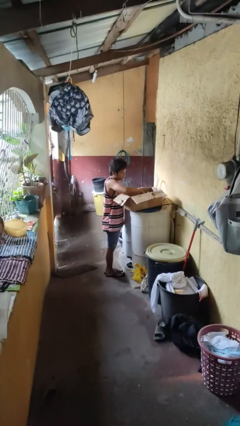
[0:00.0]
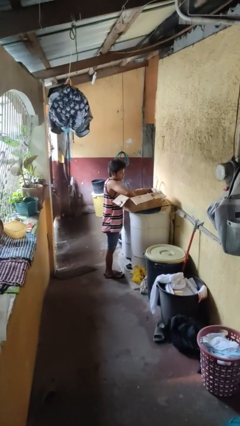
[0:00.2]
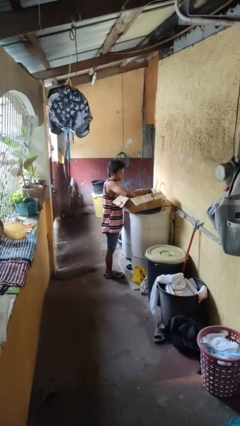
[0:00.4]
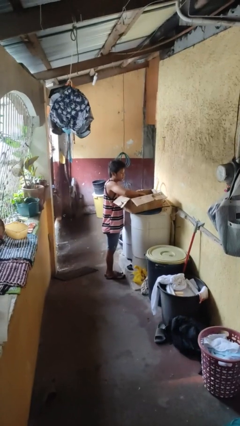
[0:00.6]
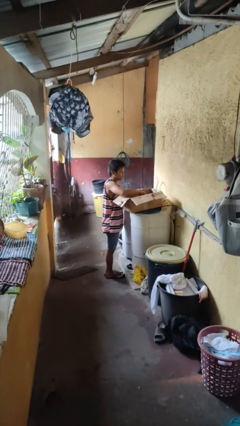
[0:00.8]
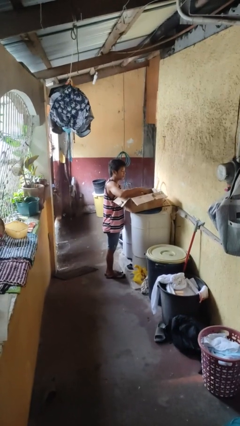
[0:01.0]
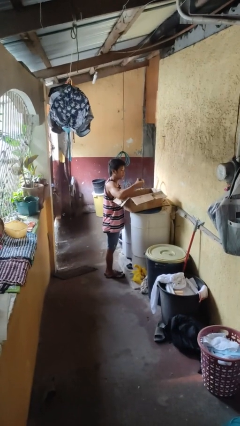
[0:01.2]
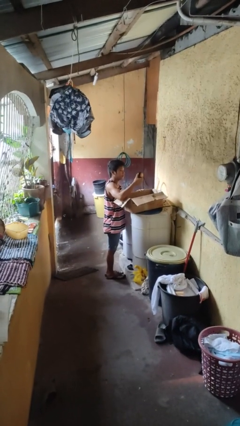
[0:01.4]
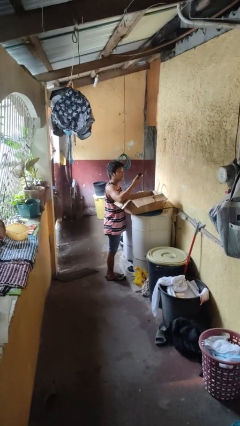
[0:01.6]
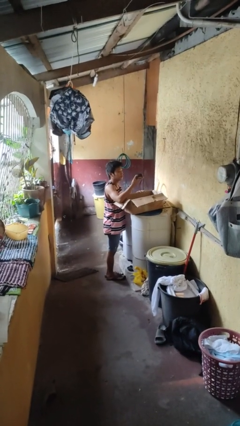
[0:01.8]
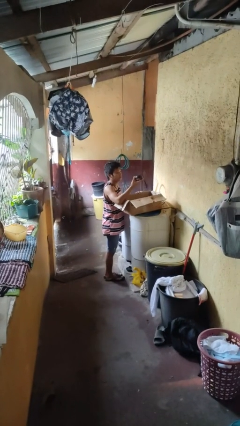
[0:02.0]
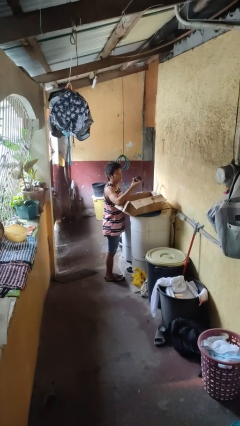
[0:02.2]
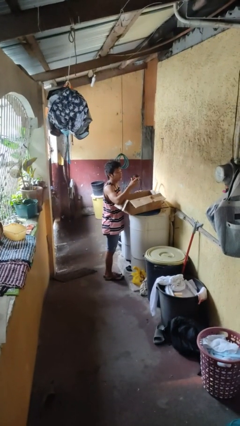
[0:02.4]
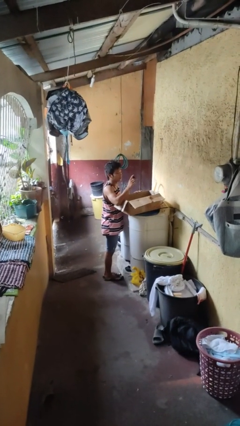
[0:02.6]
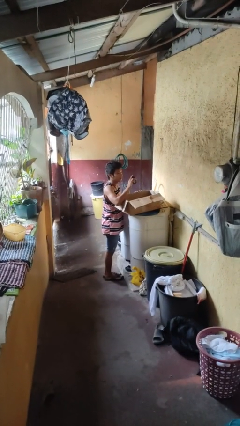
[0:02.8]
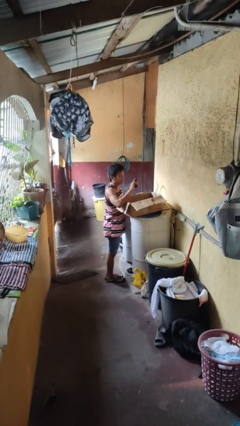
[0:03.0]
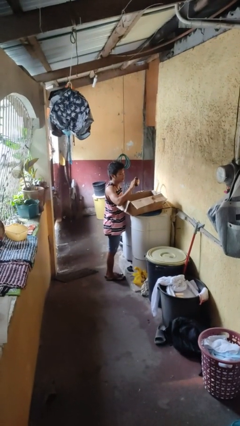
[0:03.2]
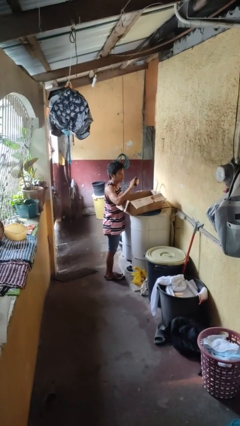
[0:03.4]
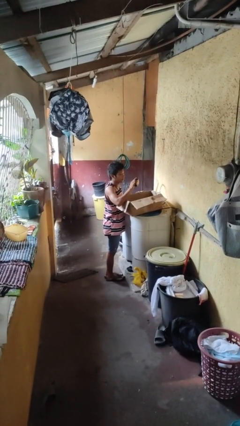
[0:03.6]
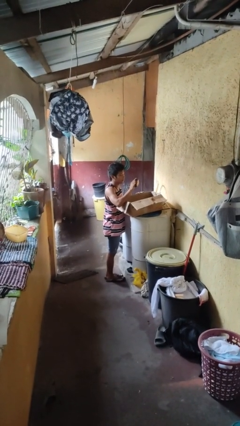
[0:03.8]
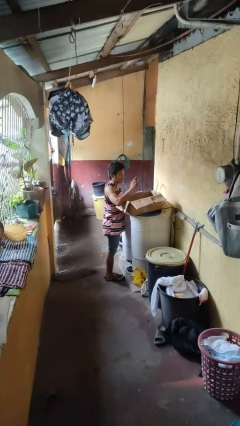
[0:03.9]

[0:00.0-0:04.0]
person takes object from box

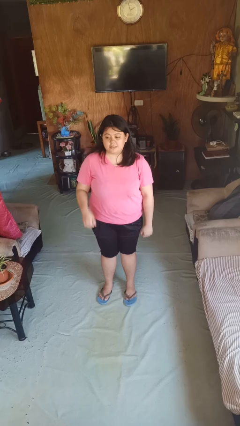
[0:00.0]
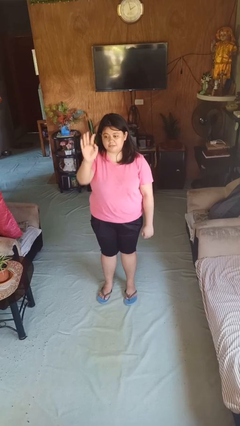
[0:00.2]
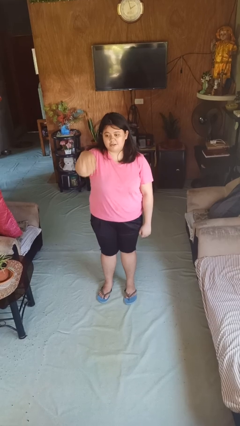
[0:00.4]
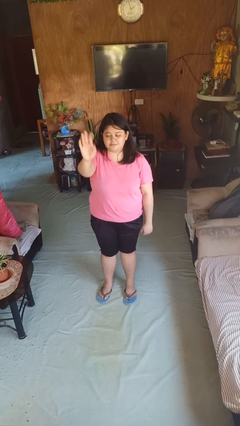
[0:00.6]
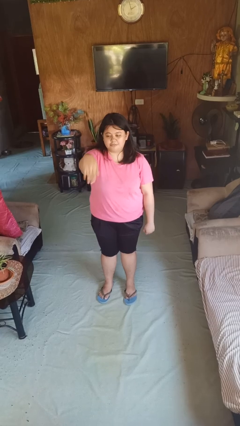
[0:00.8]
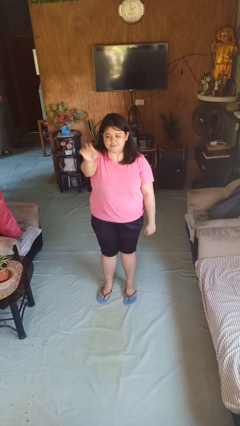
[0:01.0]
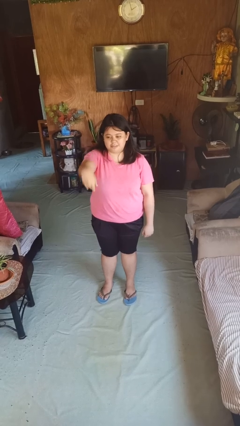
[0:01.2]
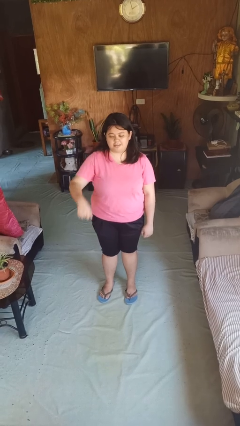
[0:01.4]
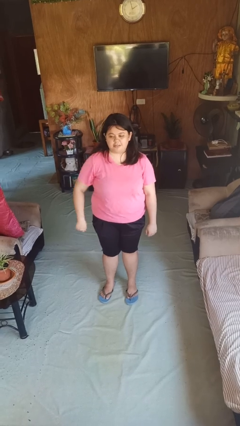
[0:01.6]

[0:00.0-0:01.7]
person gestures come here

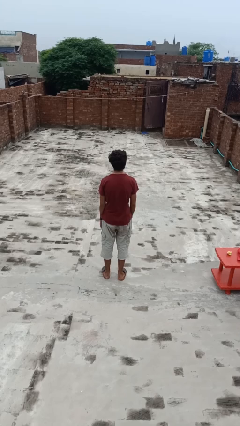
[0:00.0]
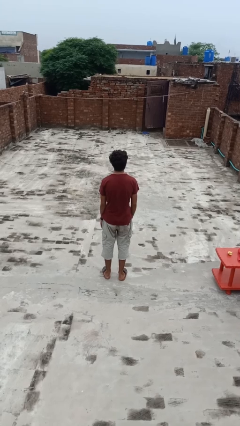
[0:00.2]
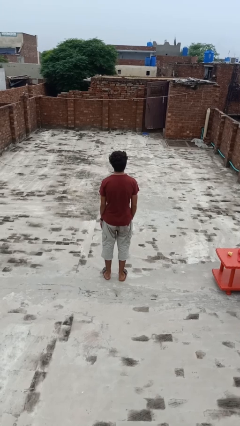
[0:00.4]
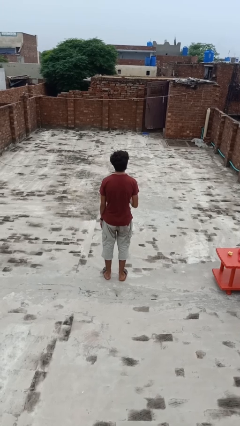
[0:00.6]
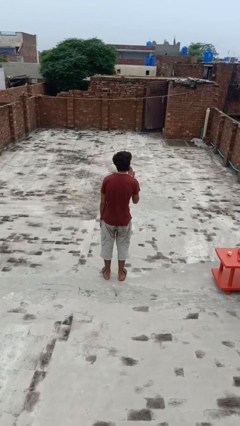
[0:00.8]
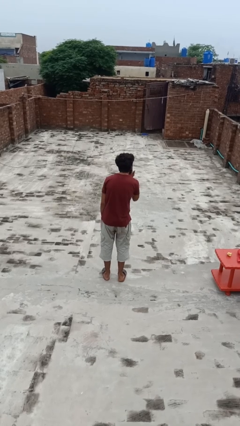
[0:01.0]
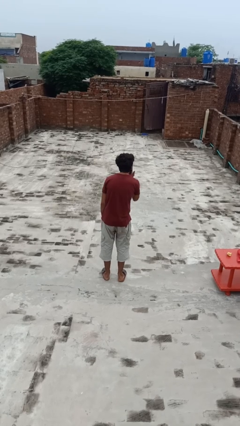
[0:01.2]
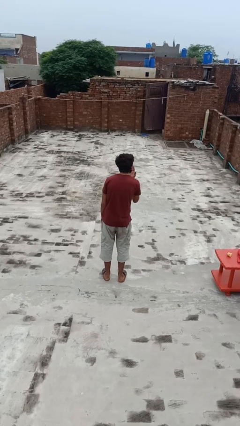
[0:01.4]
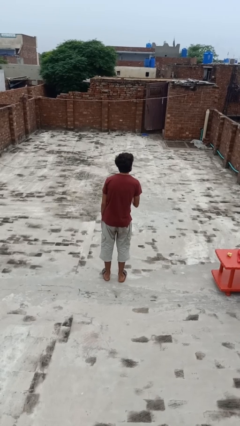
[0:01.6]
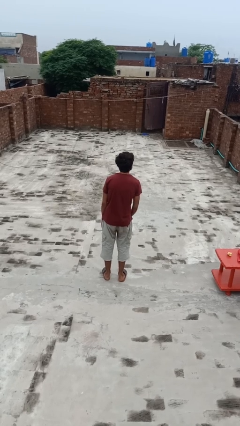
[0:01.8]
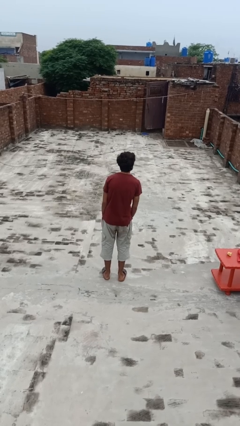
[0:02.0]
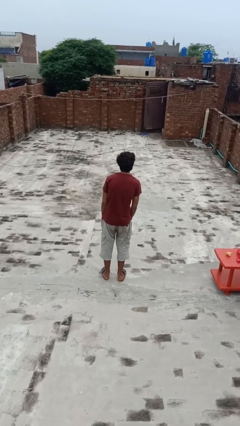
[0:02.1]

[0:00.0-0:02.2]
person gestures blow kiss

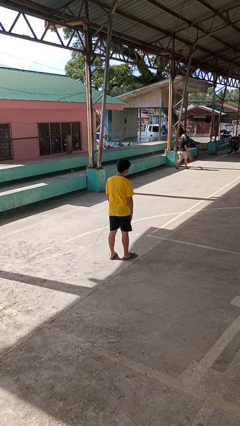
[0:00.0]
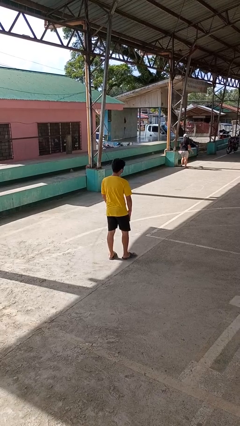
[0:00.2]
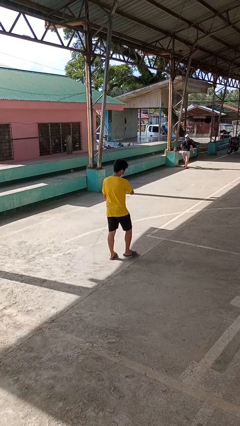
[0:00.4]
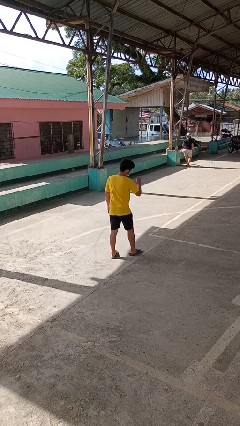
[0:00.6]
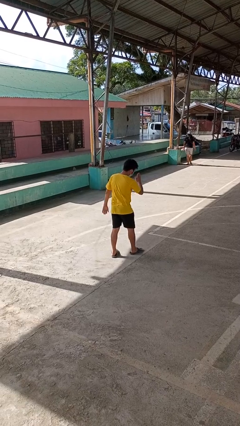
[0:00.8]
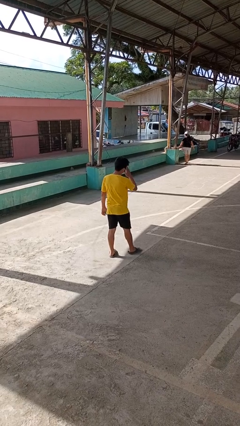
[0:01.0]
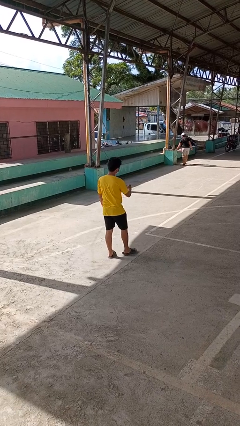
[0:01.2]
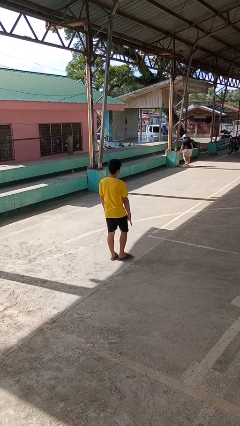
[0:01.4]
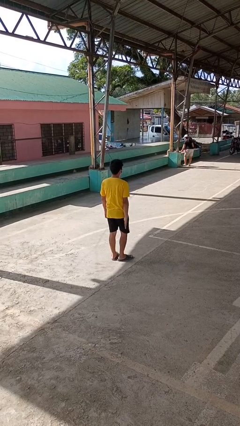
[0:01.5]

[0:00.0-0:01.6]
person karate chop

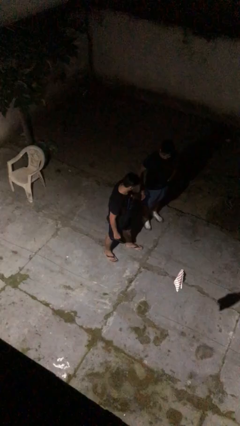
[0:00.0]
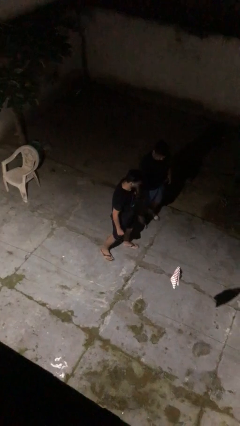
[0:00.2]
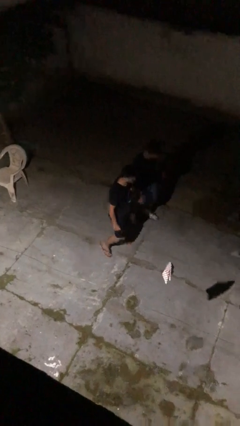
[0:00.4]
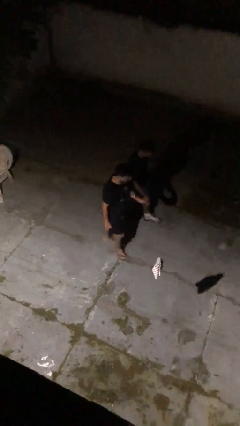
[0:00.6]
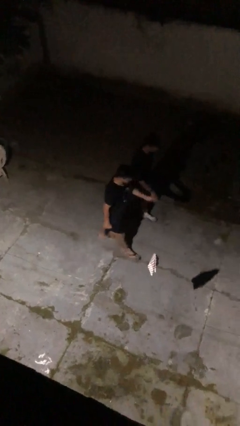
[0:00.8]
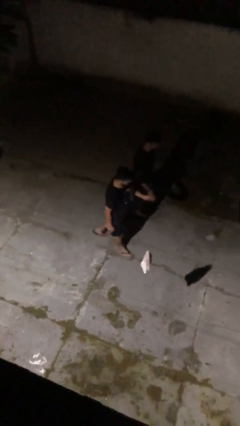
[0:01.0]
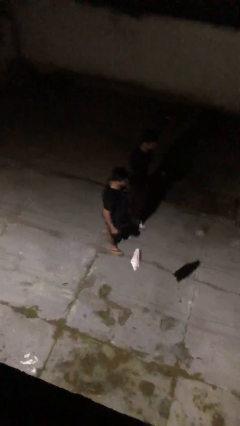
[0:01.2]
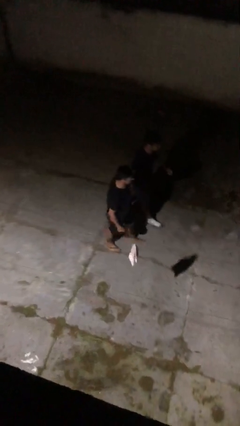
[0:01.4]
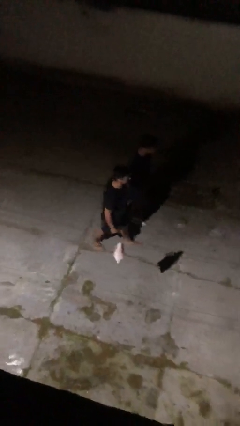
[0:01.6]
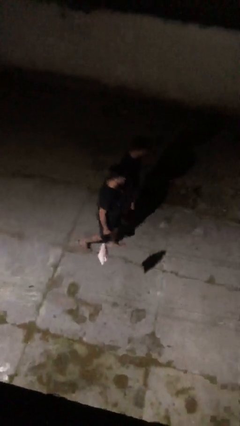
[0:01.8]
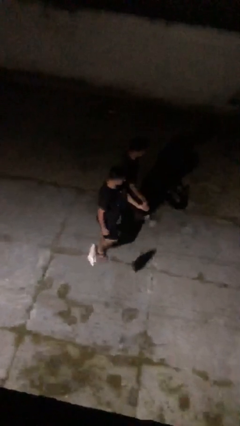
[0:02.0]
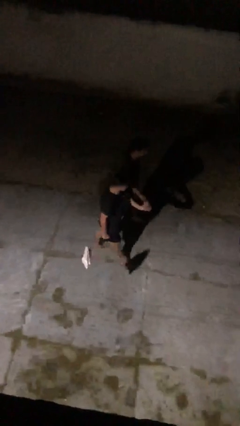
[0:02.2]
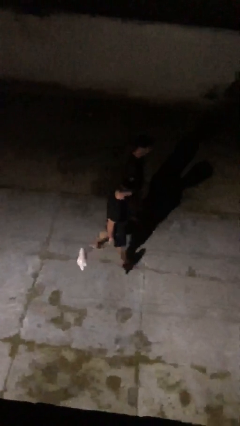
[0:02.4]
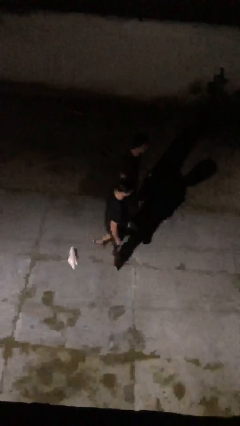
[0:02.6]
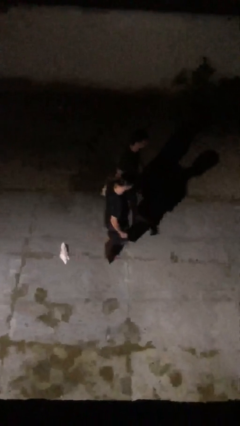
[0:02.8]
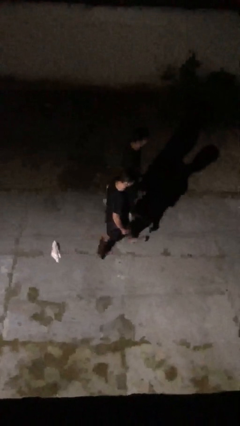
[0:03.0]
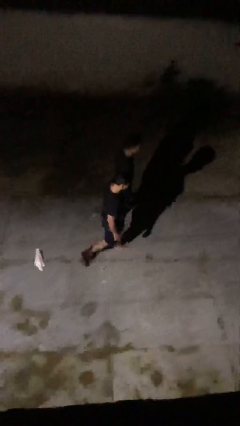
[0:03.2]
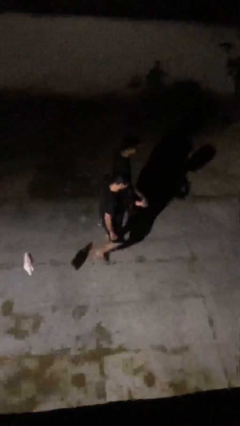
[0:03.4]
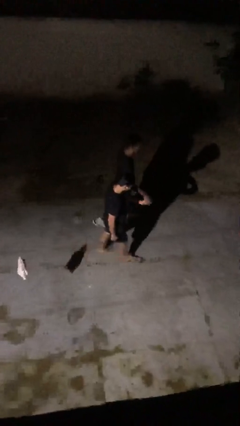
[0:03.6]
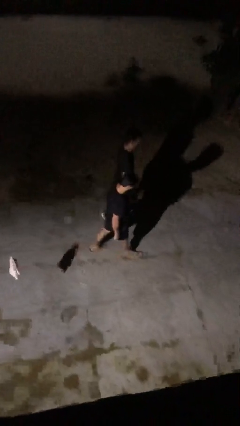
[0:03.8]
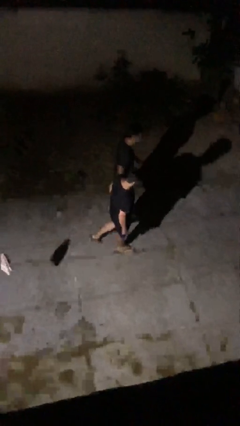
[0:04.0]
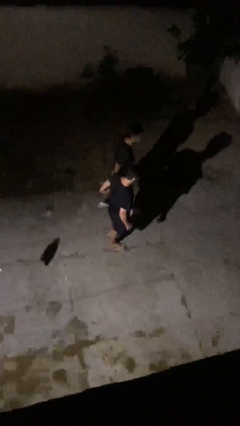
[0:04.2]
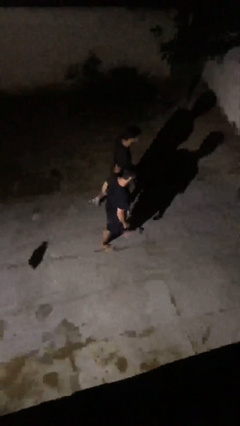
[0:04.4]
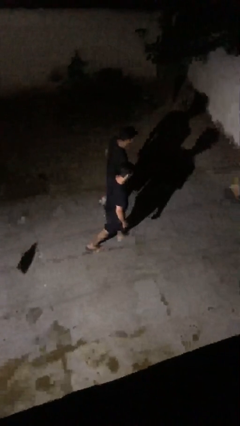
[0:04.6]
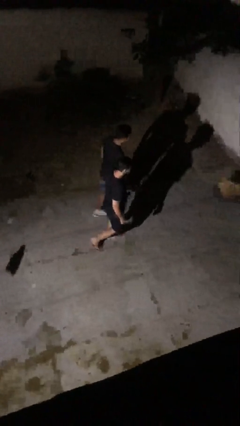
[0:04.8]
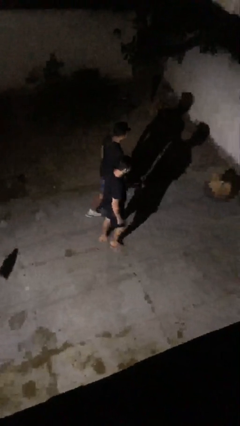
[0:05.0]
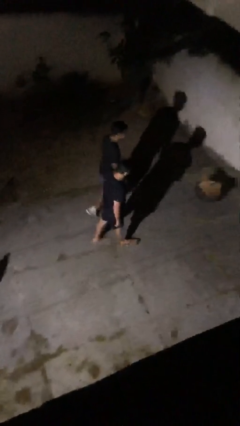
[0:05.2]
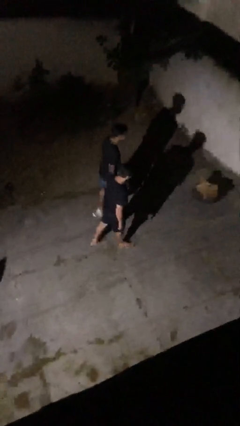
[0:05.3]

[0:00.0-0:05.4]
person holds hand

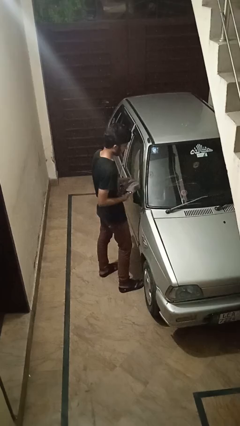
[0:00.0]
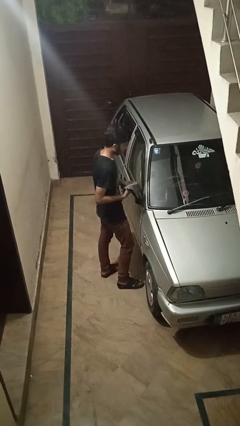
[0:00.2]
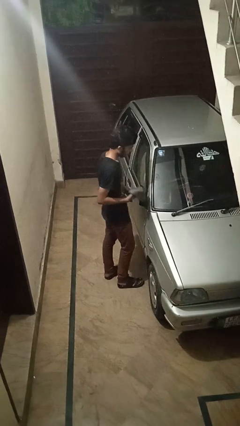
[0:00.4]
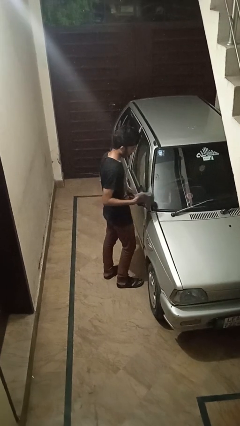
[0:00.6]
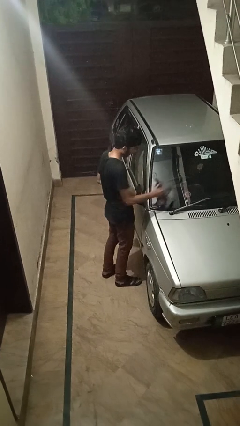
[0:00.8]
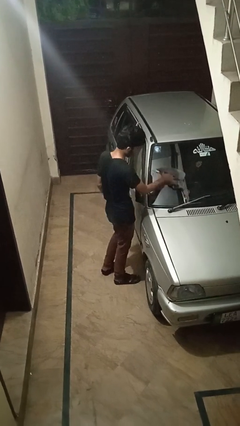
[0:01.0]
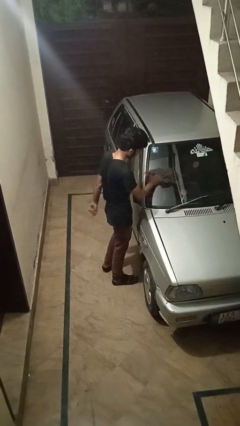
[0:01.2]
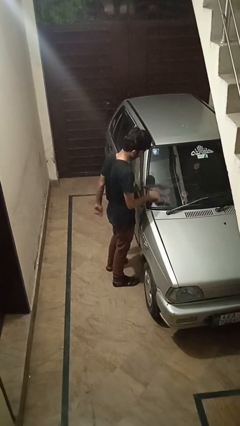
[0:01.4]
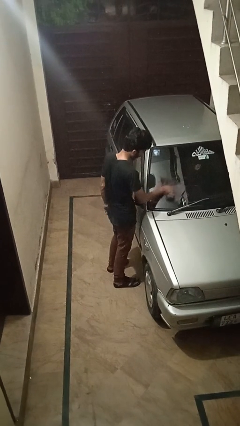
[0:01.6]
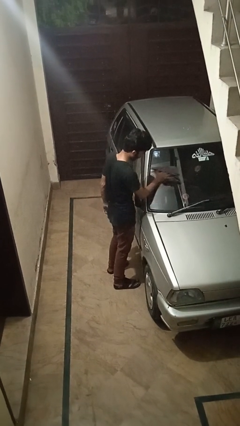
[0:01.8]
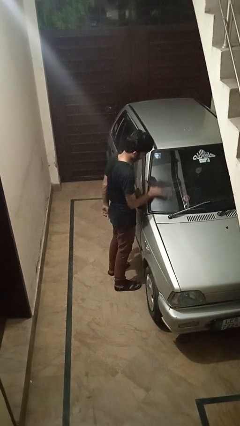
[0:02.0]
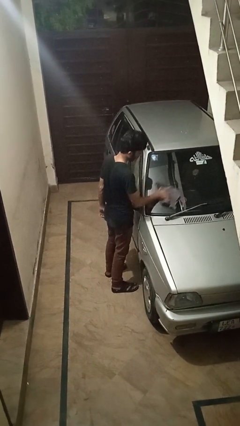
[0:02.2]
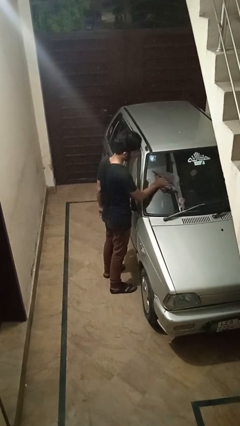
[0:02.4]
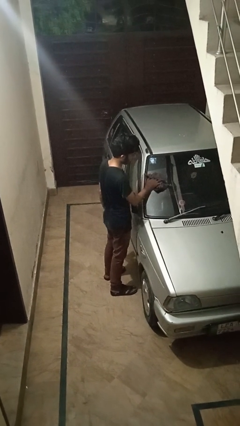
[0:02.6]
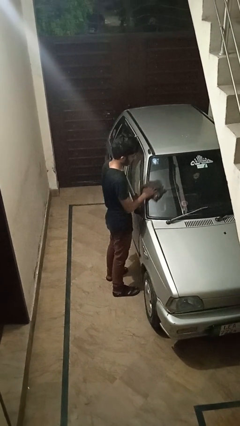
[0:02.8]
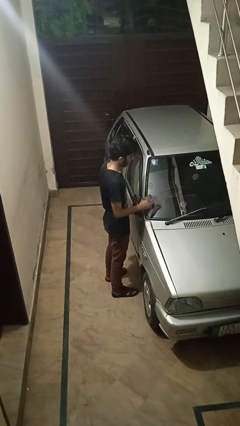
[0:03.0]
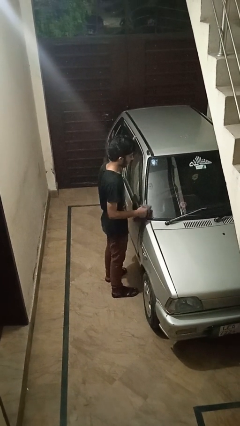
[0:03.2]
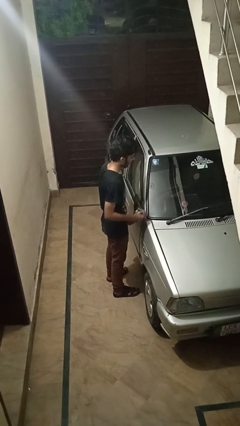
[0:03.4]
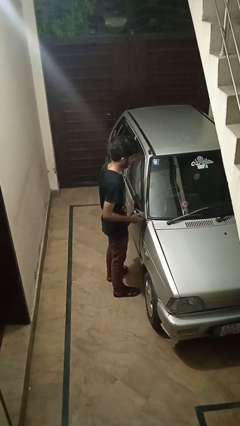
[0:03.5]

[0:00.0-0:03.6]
person polishes car with rag
